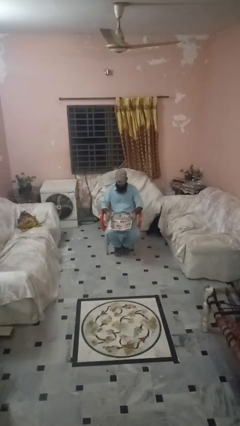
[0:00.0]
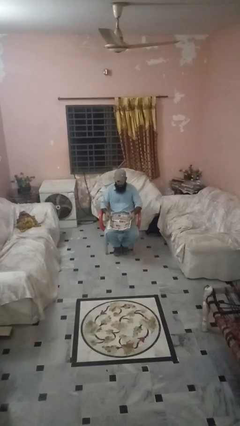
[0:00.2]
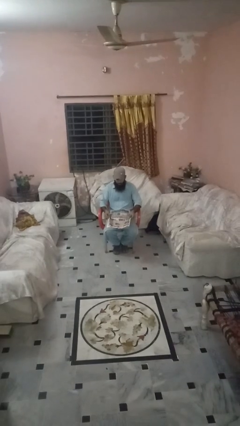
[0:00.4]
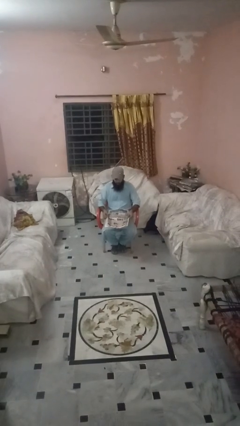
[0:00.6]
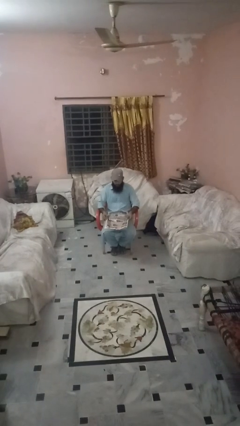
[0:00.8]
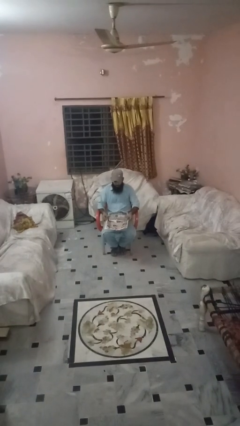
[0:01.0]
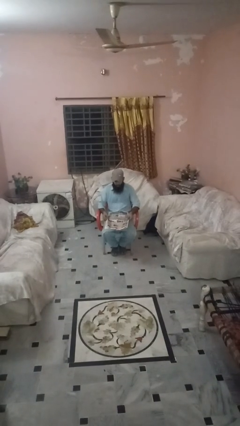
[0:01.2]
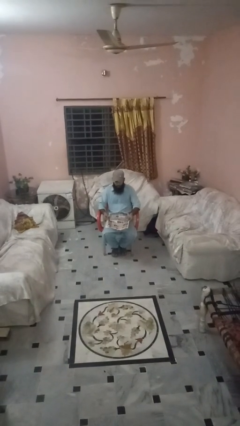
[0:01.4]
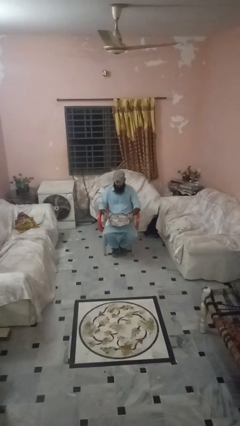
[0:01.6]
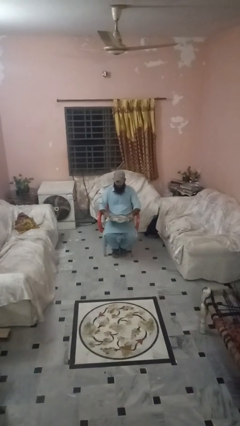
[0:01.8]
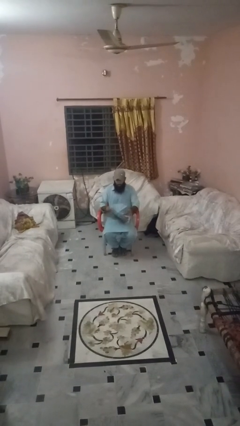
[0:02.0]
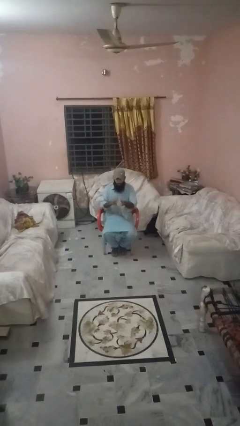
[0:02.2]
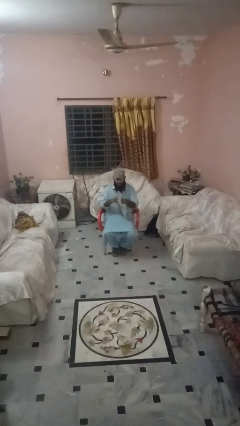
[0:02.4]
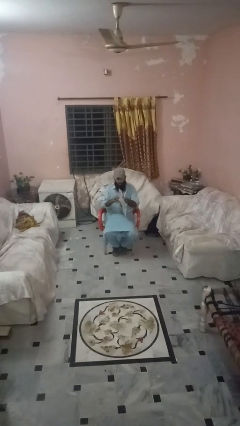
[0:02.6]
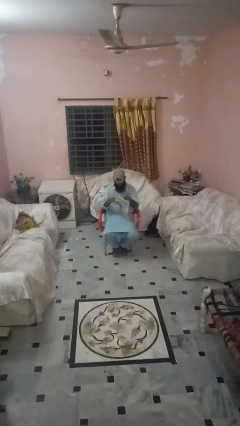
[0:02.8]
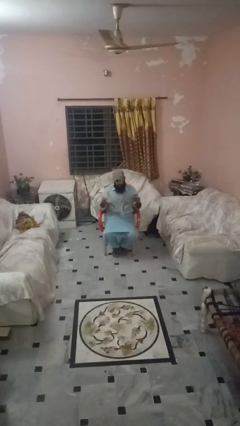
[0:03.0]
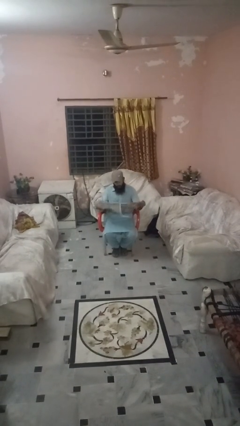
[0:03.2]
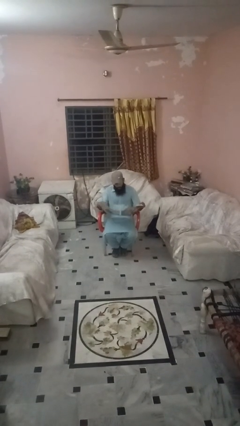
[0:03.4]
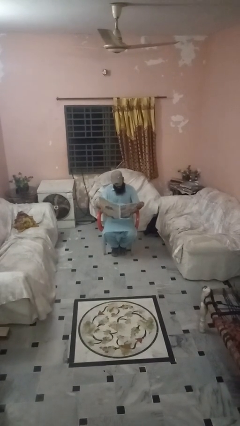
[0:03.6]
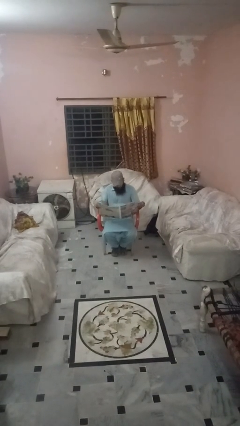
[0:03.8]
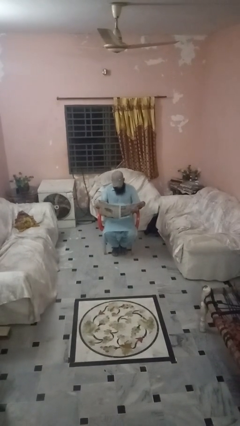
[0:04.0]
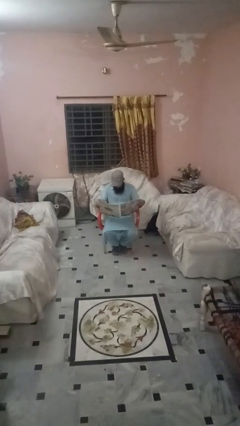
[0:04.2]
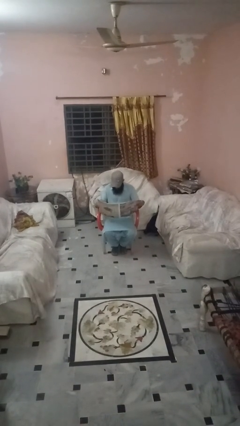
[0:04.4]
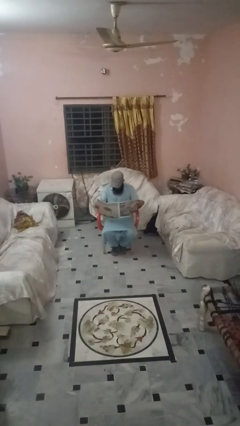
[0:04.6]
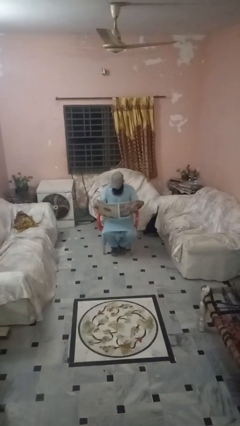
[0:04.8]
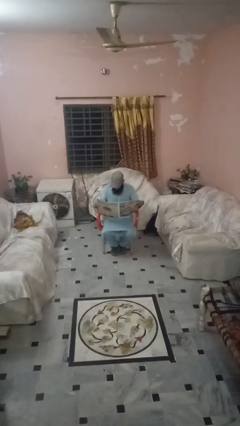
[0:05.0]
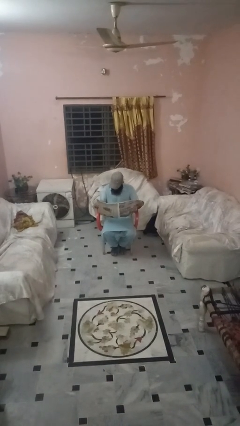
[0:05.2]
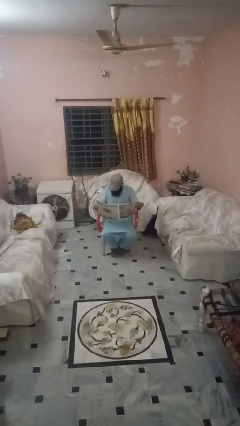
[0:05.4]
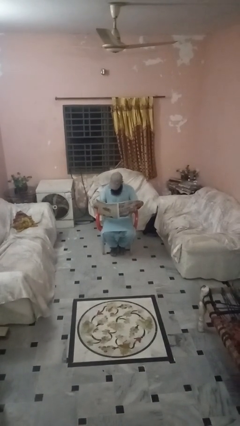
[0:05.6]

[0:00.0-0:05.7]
person reads newspaper

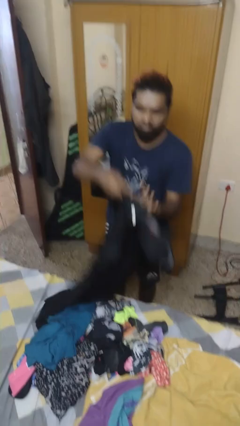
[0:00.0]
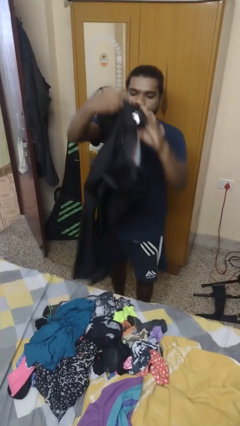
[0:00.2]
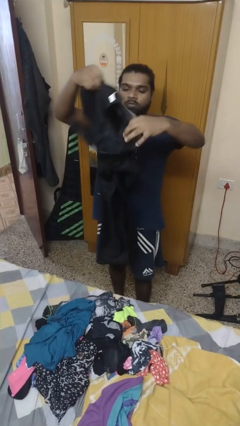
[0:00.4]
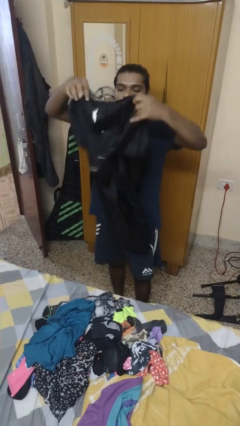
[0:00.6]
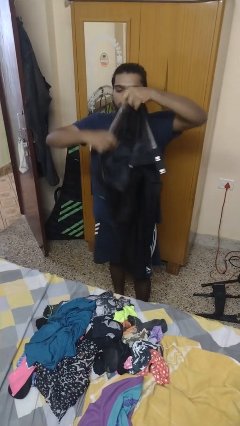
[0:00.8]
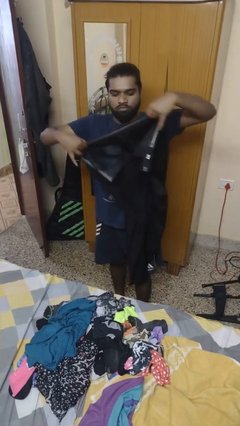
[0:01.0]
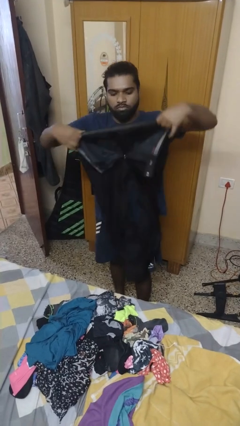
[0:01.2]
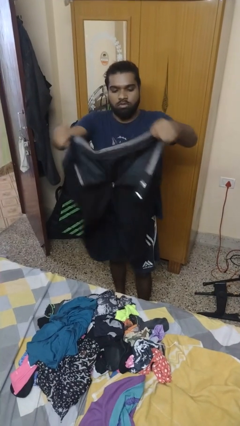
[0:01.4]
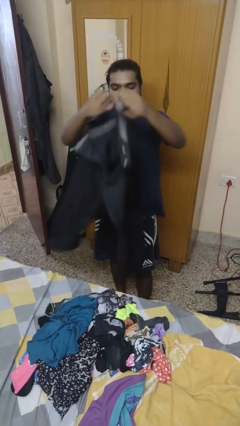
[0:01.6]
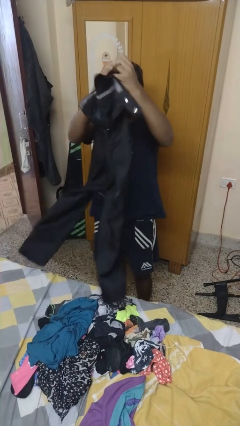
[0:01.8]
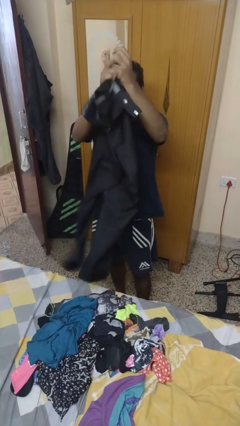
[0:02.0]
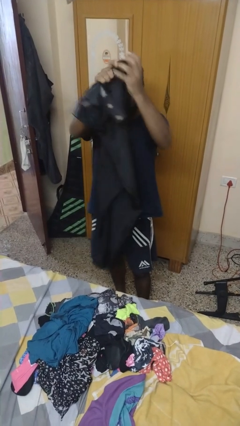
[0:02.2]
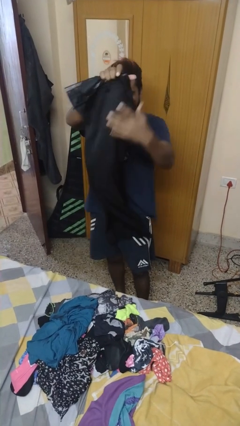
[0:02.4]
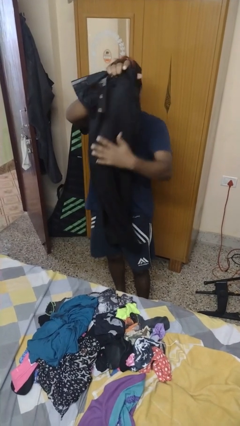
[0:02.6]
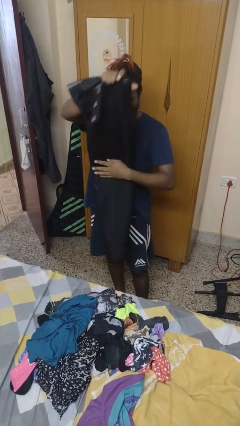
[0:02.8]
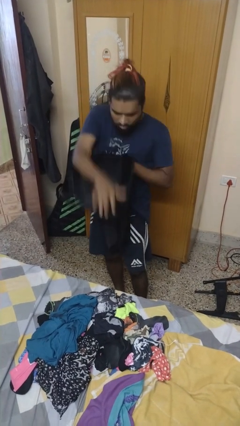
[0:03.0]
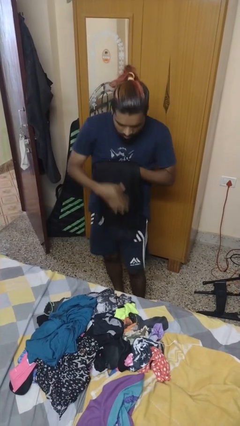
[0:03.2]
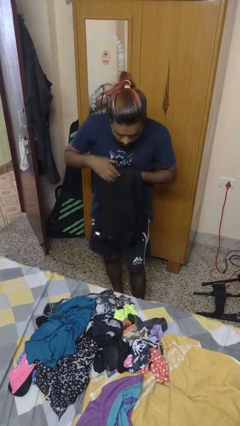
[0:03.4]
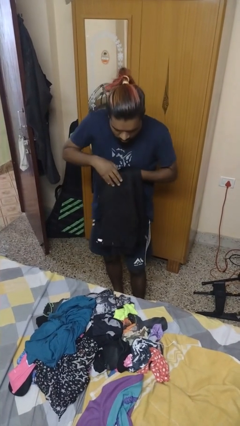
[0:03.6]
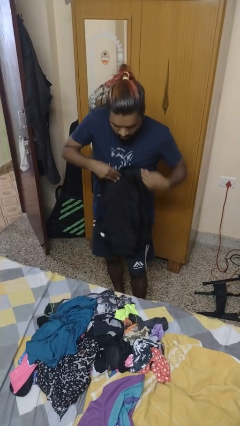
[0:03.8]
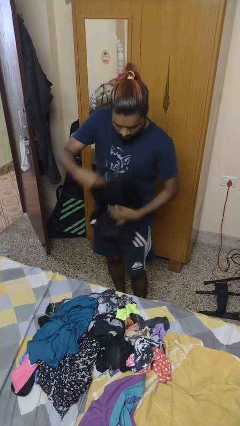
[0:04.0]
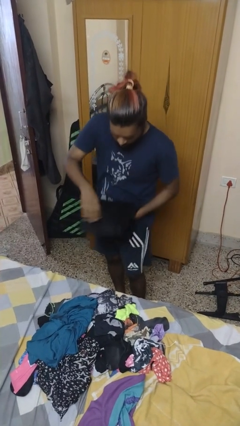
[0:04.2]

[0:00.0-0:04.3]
person folds pants

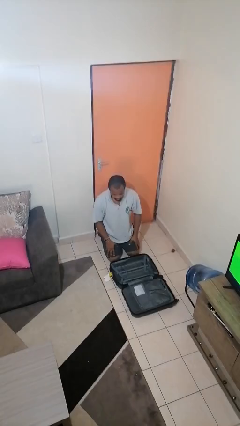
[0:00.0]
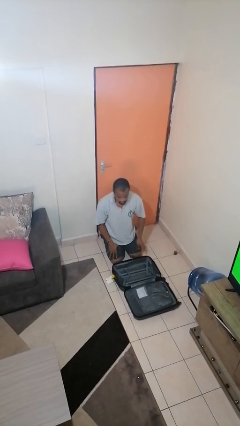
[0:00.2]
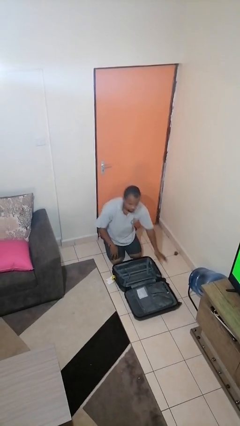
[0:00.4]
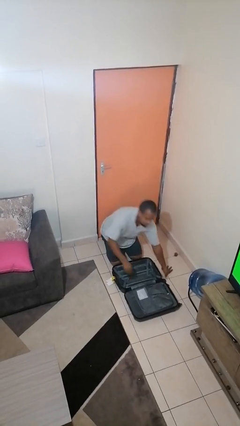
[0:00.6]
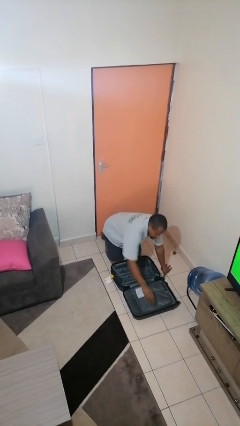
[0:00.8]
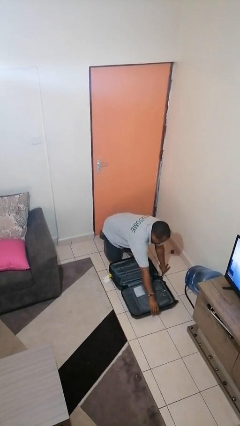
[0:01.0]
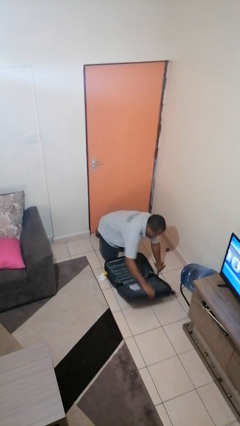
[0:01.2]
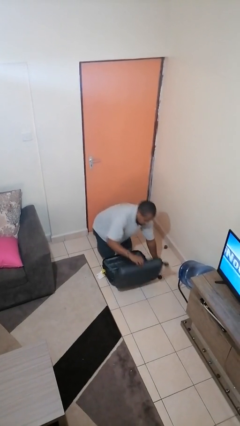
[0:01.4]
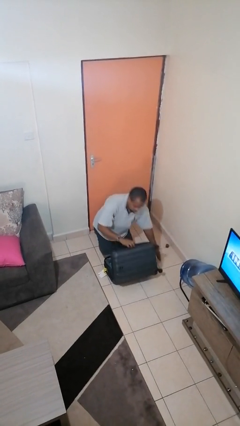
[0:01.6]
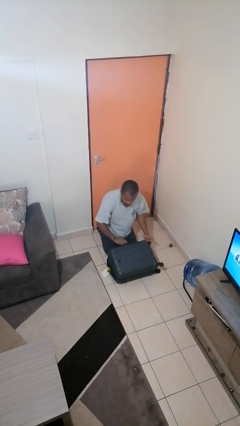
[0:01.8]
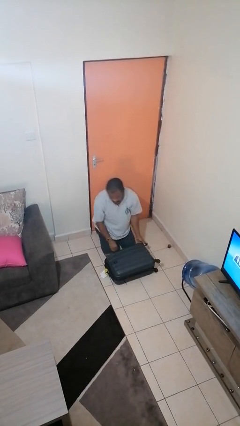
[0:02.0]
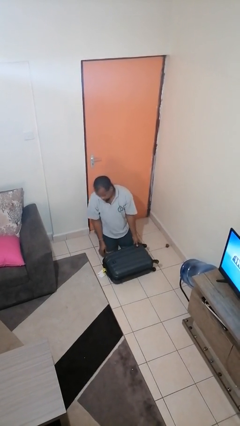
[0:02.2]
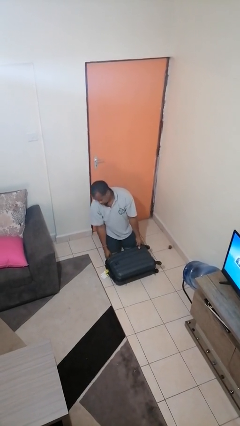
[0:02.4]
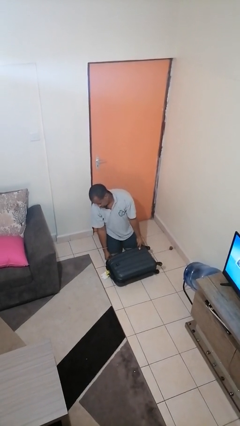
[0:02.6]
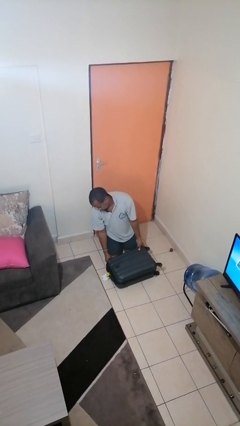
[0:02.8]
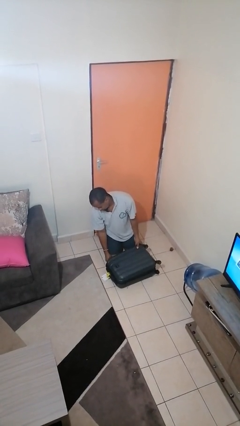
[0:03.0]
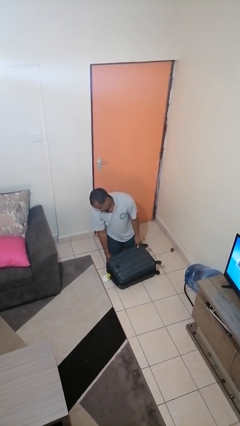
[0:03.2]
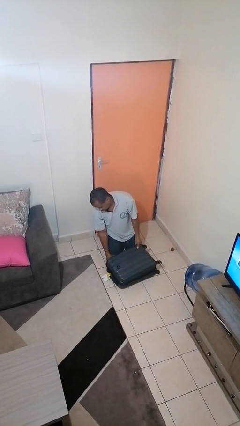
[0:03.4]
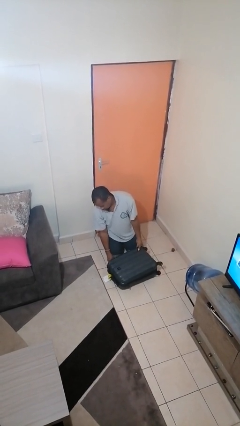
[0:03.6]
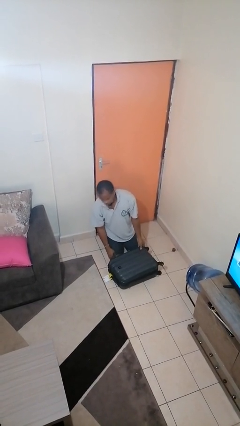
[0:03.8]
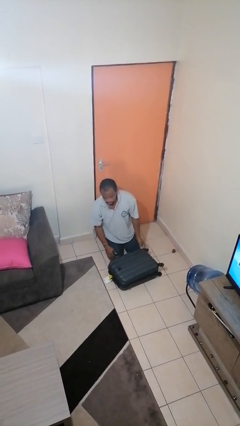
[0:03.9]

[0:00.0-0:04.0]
person closes suitcase

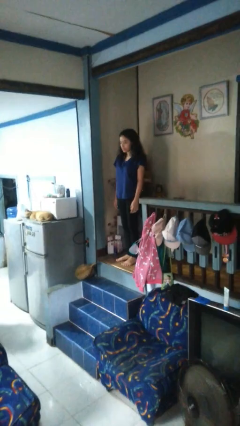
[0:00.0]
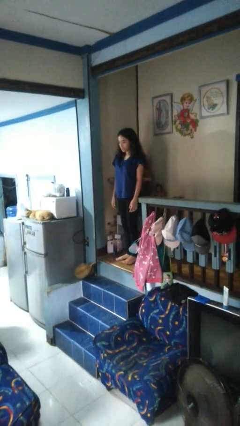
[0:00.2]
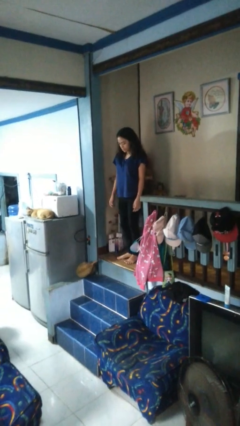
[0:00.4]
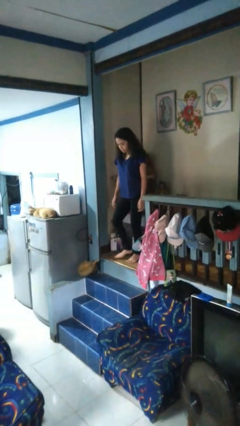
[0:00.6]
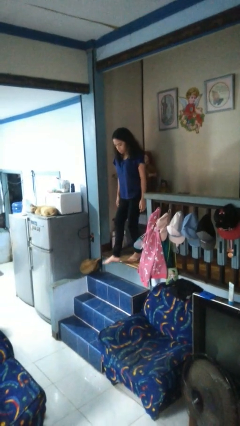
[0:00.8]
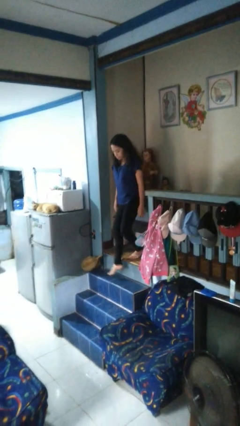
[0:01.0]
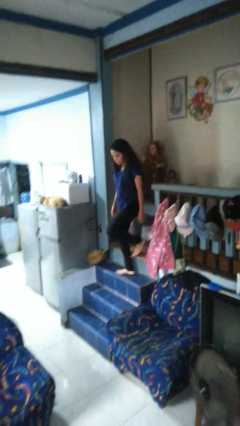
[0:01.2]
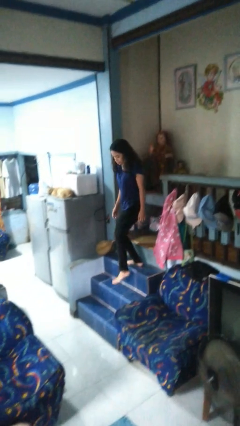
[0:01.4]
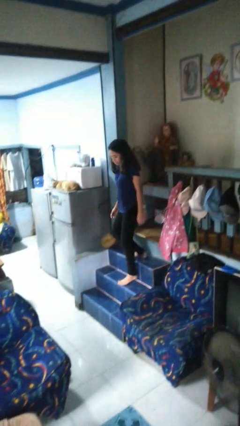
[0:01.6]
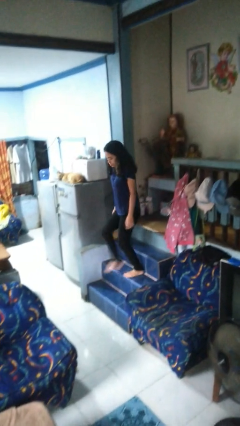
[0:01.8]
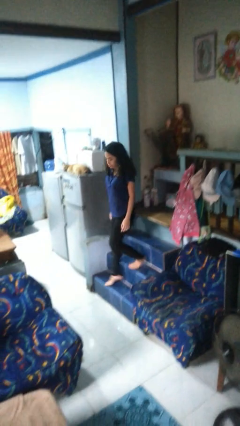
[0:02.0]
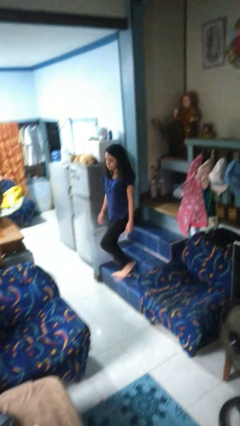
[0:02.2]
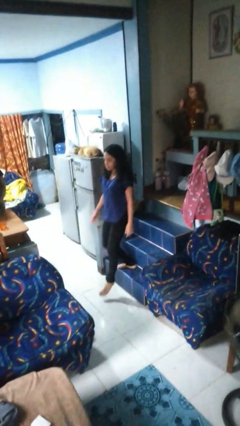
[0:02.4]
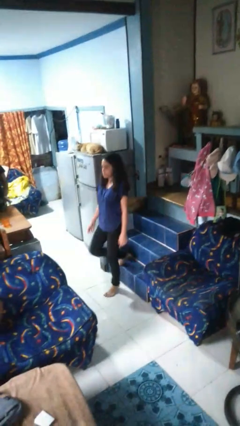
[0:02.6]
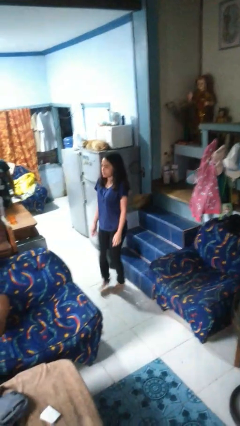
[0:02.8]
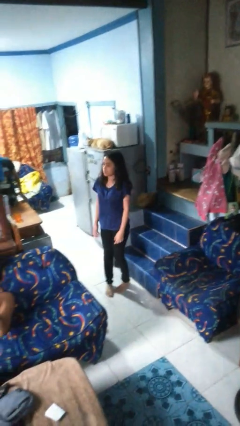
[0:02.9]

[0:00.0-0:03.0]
person climbs down stairs

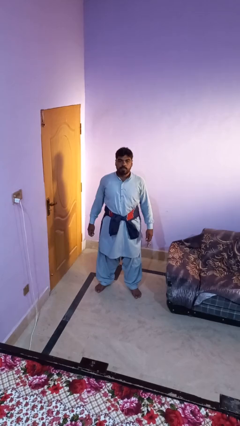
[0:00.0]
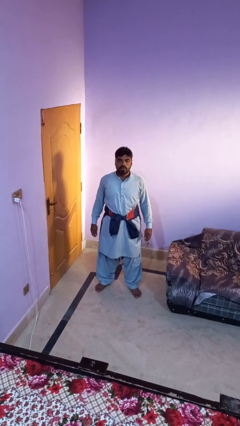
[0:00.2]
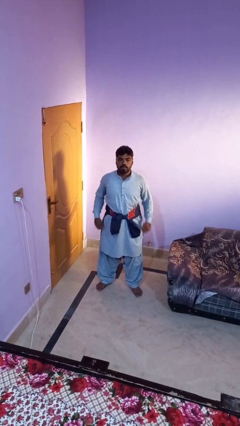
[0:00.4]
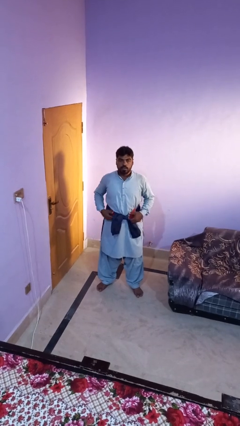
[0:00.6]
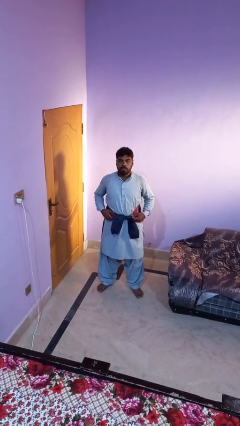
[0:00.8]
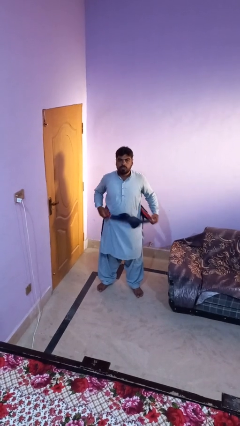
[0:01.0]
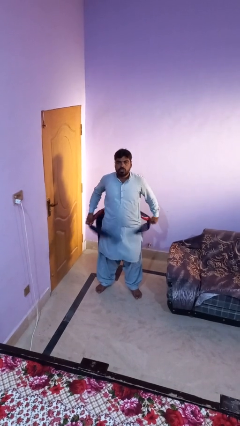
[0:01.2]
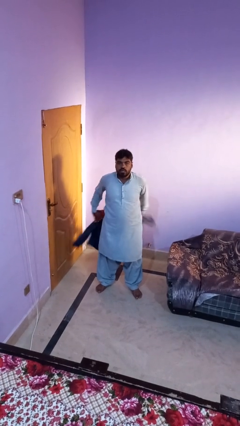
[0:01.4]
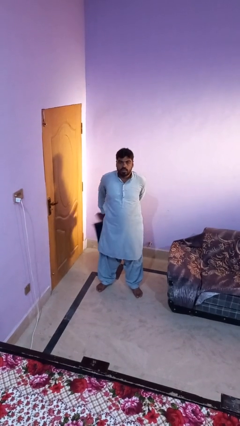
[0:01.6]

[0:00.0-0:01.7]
person unties jacket around waist
